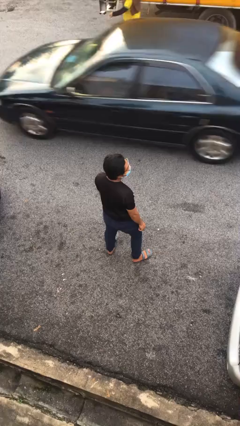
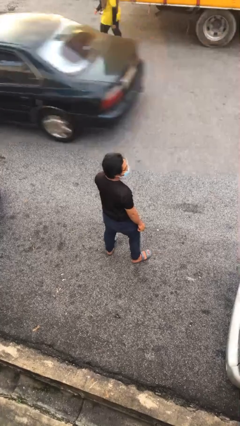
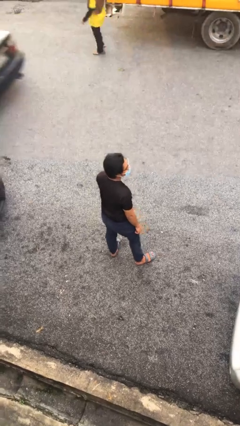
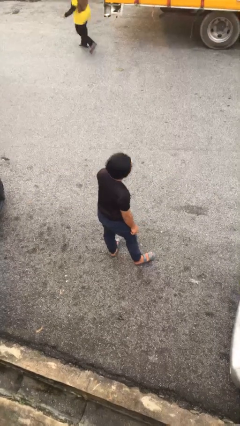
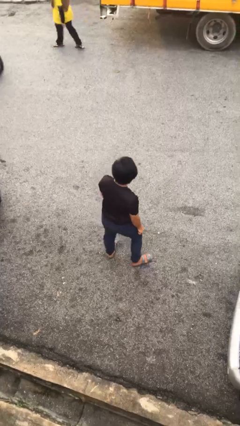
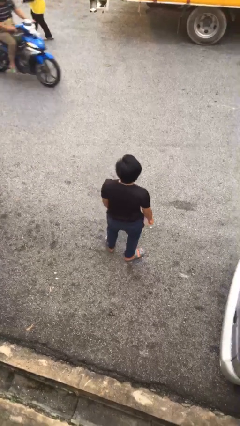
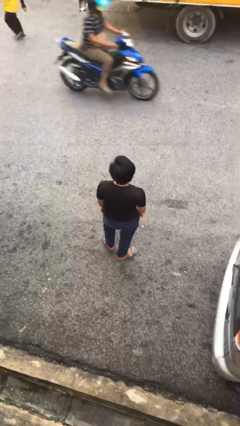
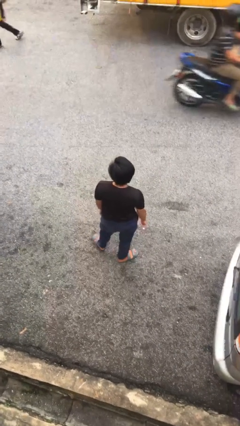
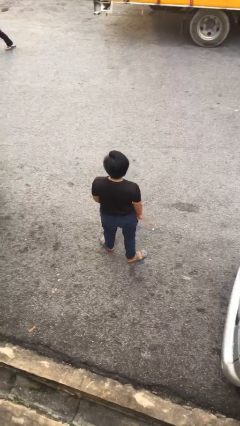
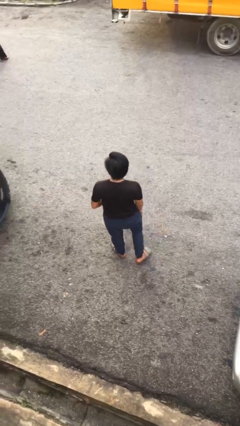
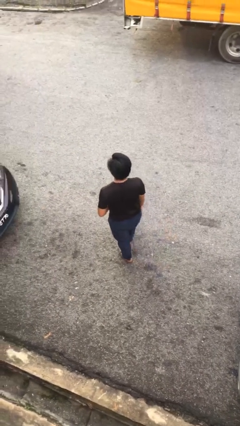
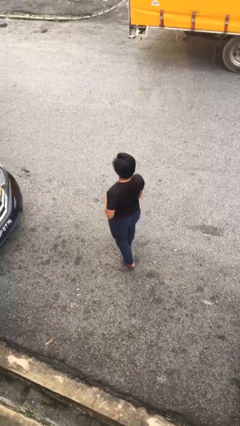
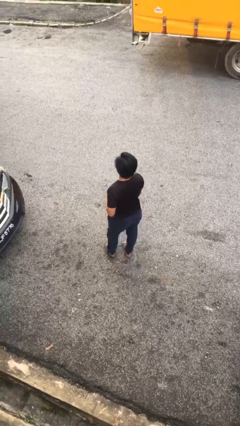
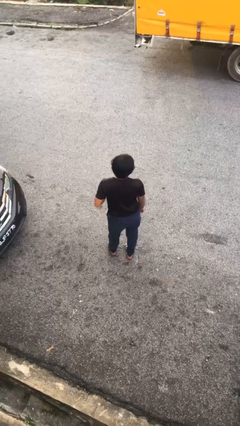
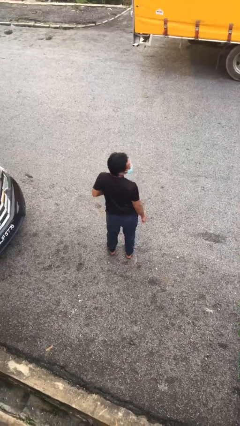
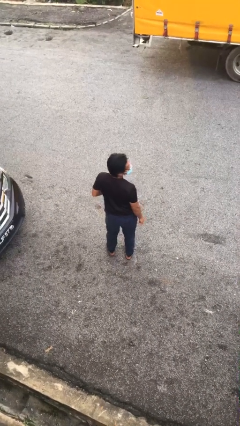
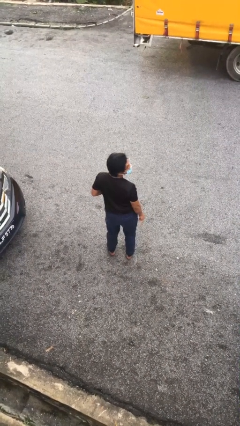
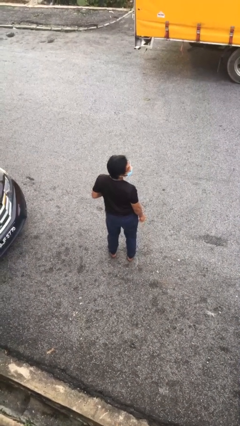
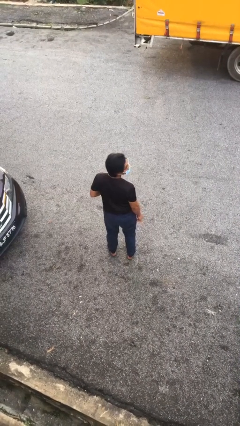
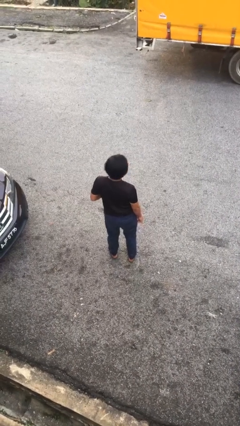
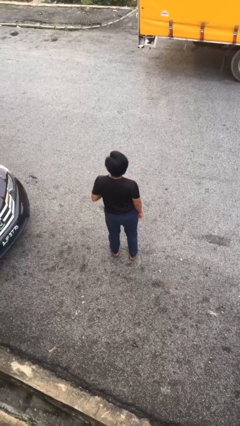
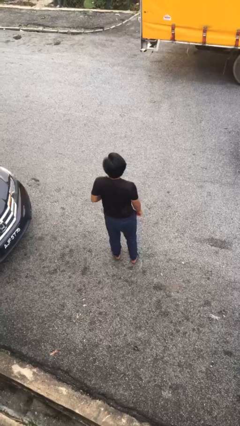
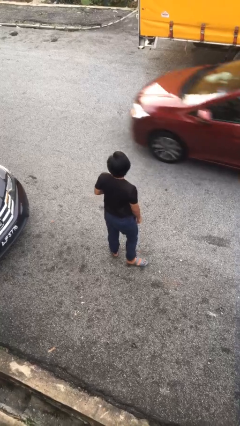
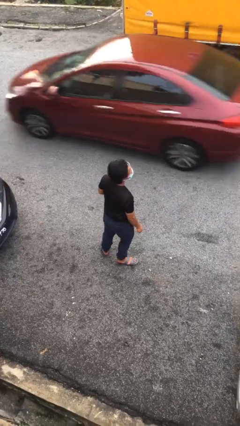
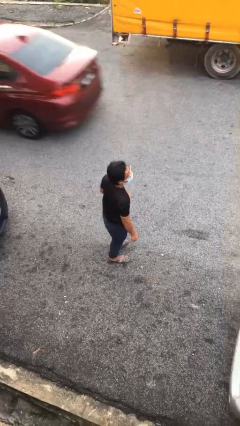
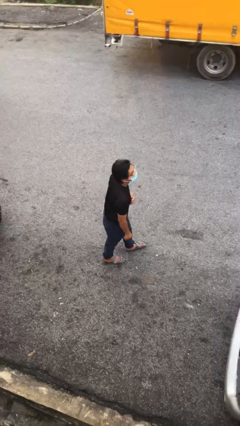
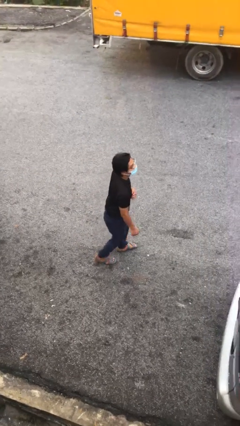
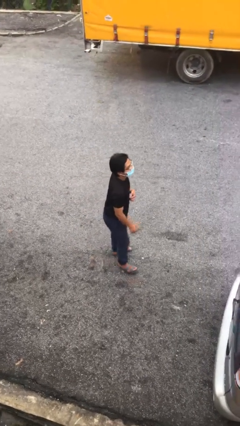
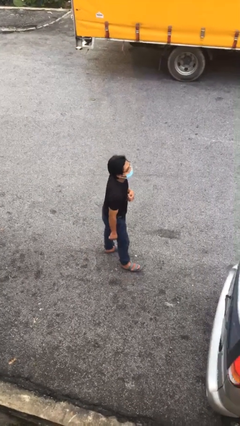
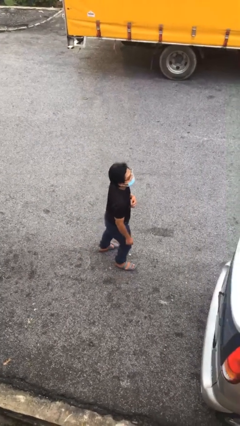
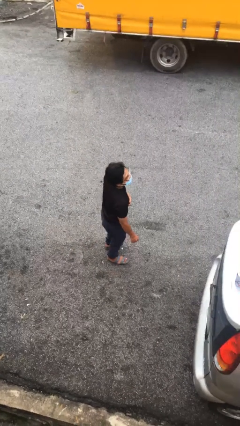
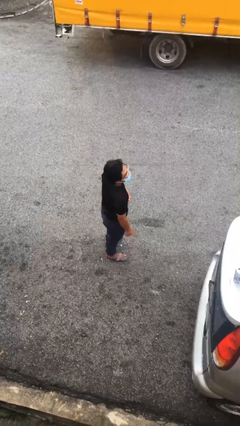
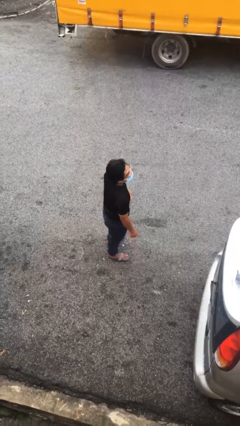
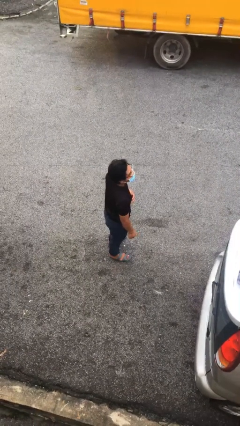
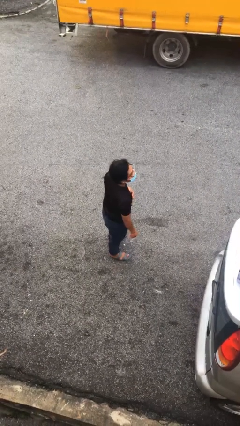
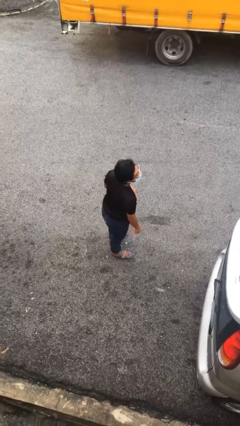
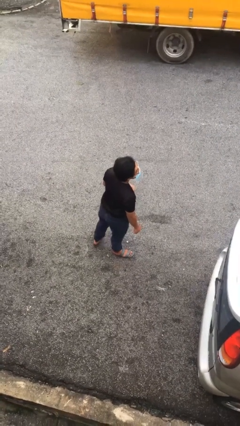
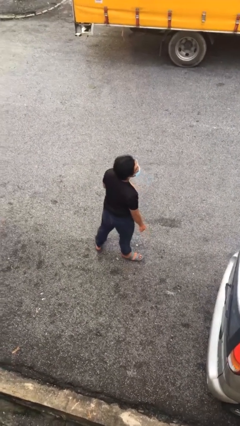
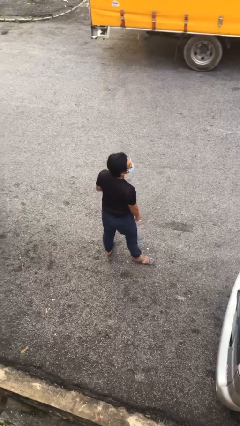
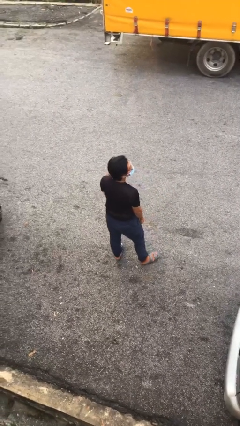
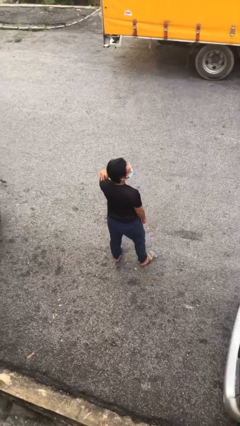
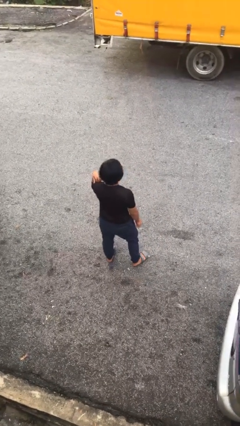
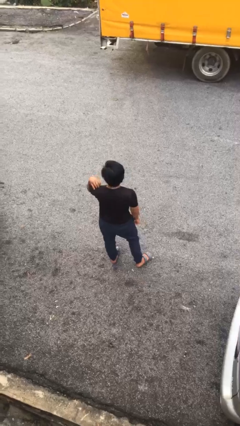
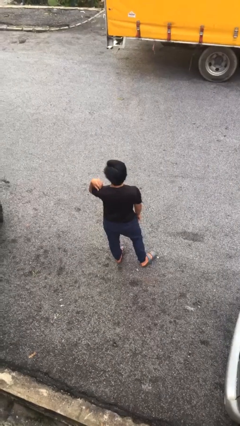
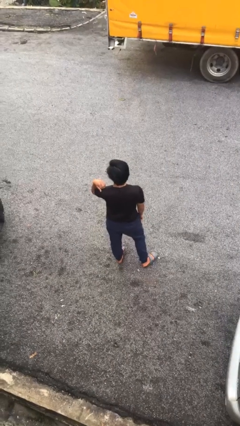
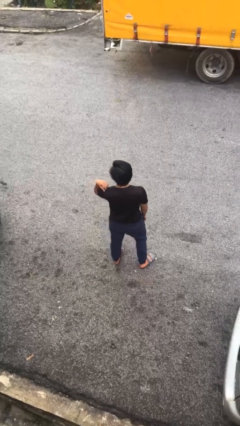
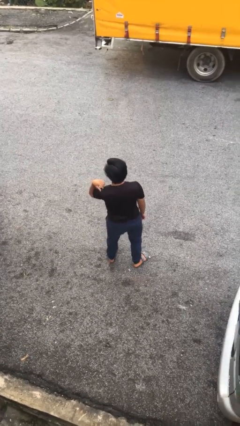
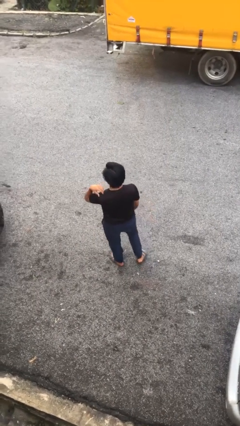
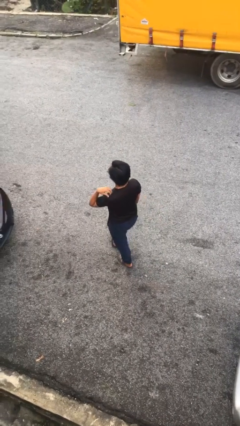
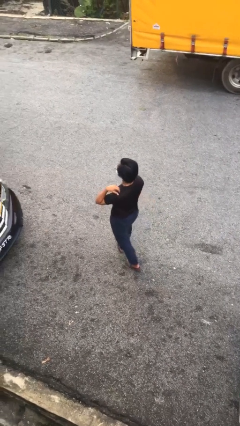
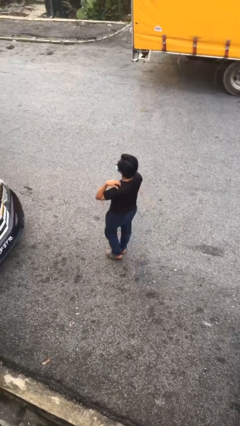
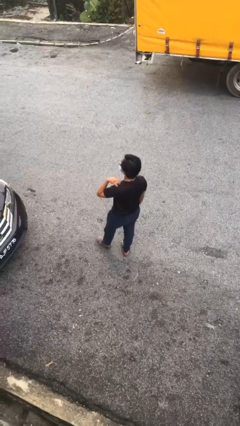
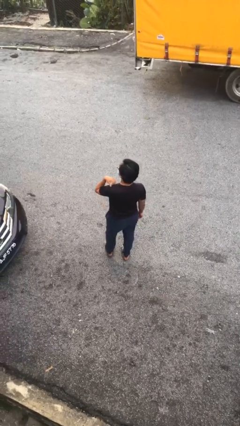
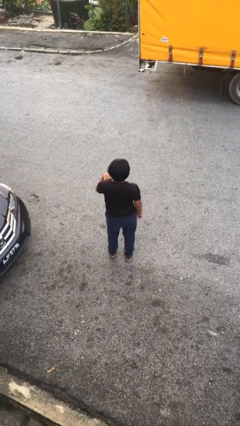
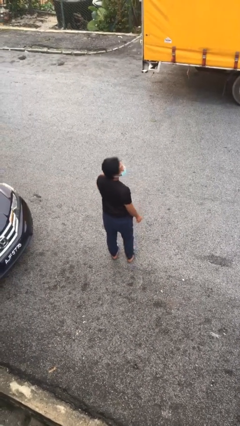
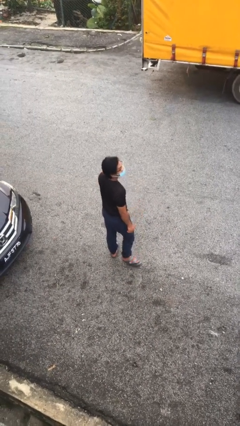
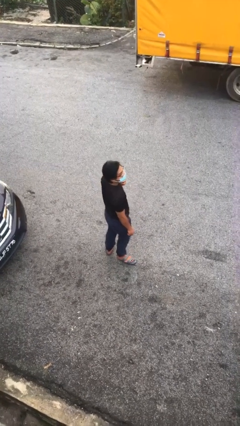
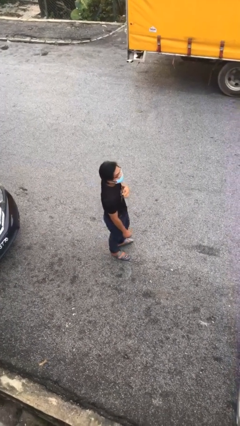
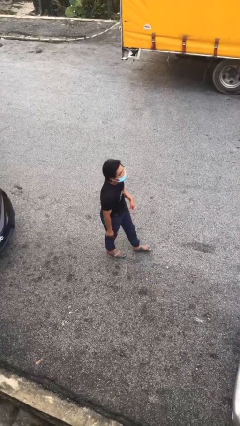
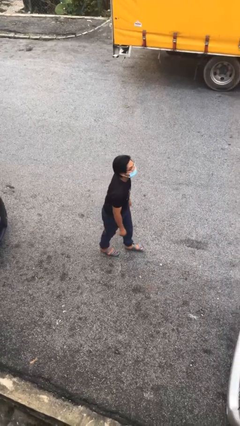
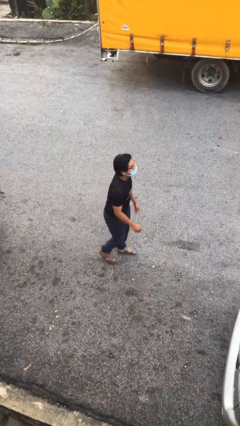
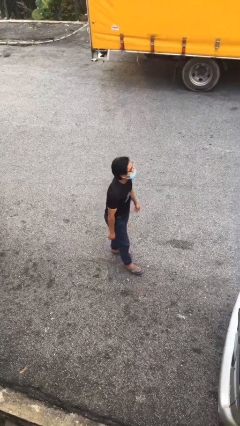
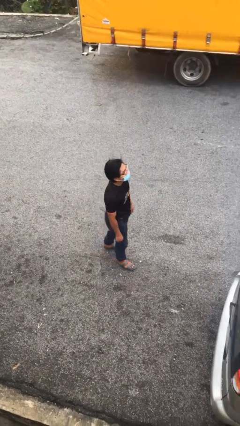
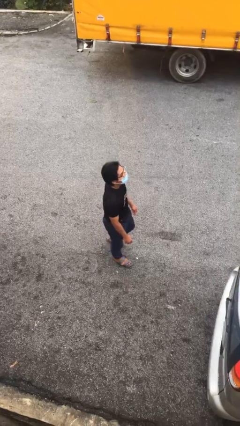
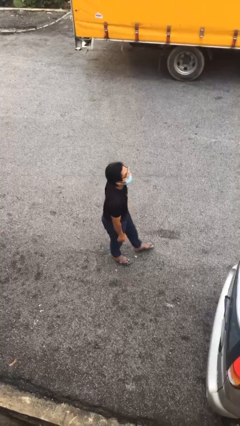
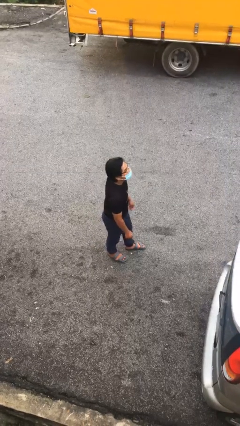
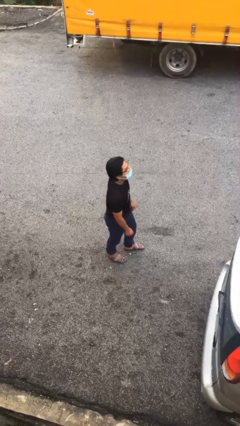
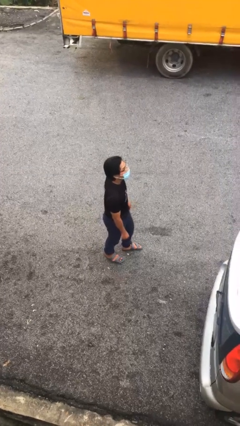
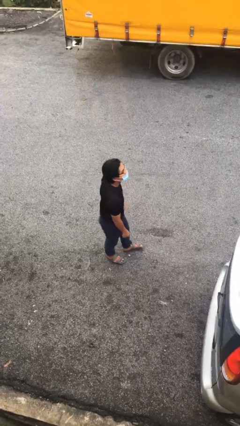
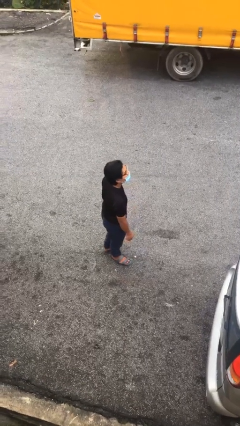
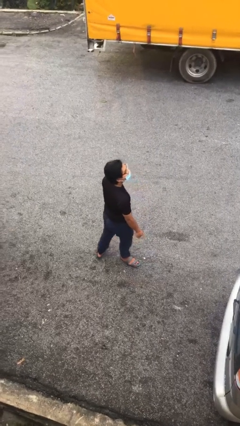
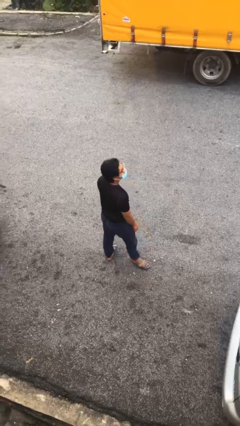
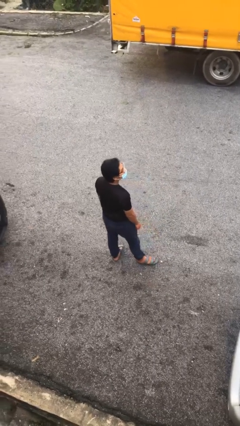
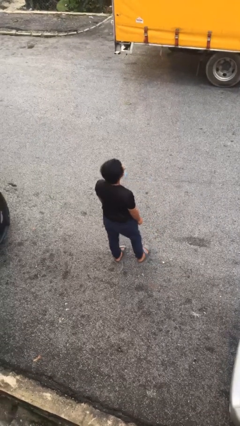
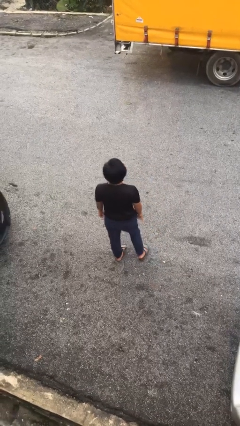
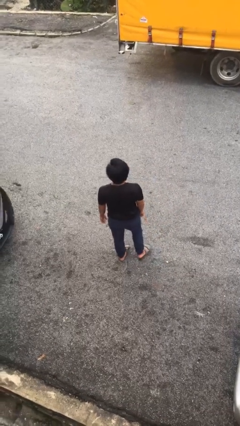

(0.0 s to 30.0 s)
person walks

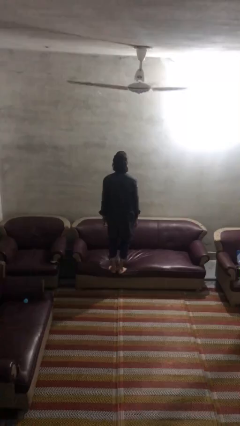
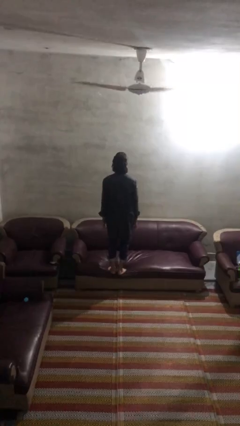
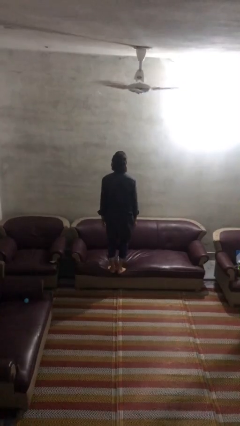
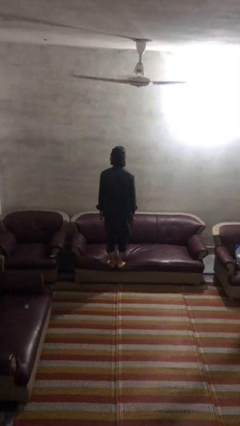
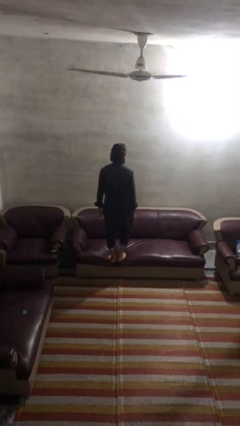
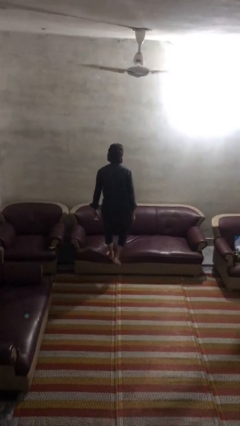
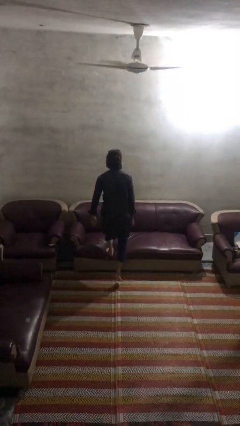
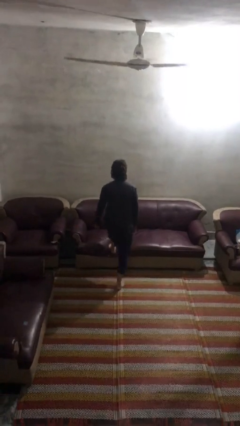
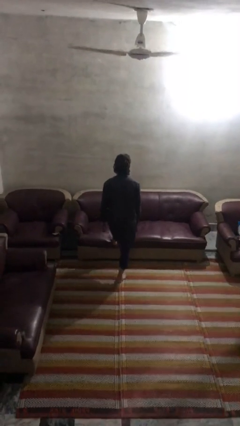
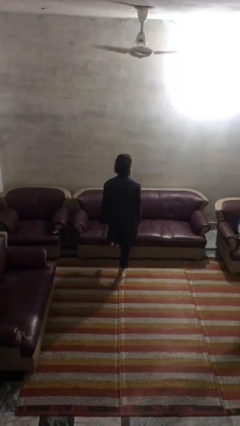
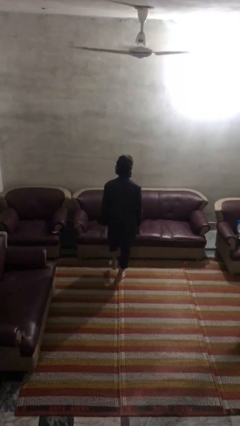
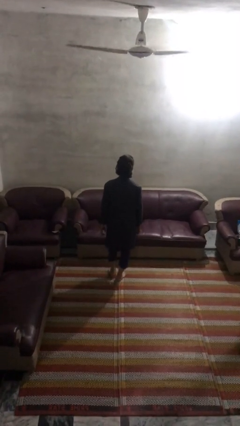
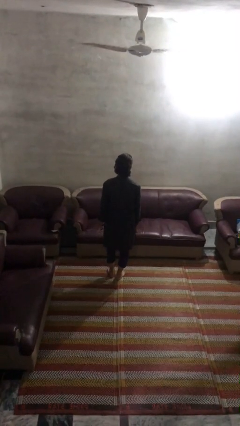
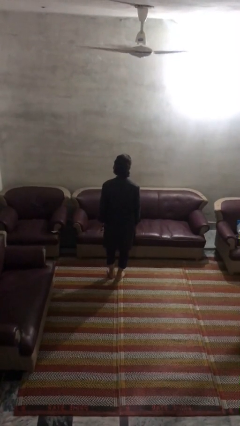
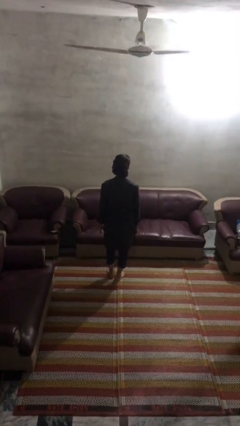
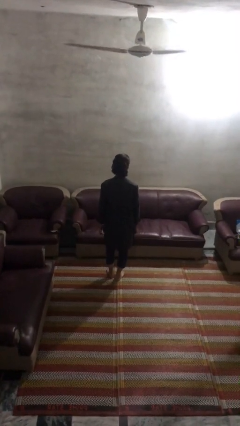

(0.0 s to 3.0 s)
person climbs off couch

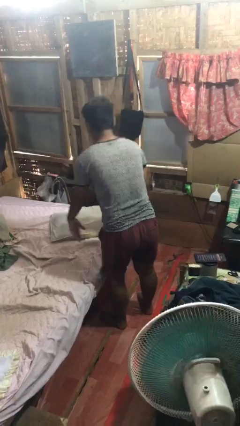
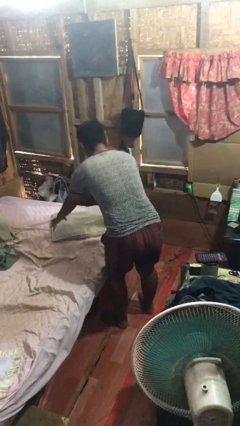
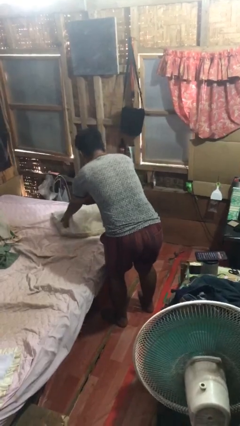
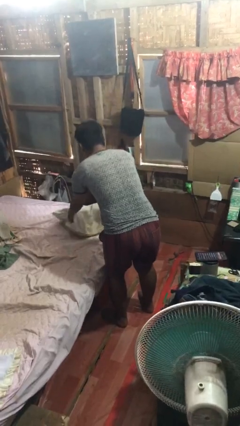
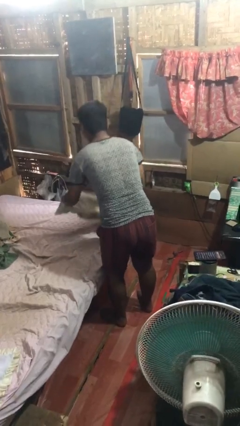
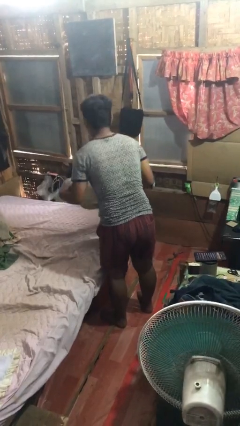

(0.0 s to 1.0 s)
person picks up object from bed
